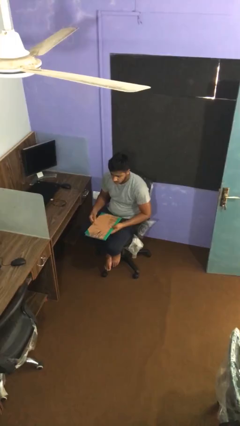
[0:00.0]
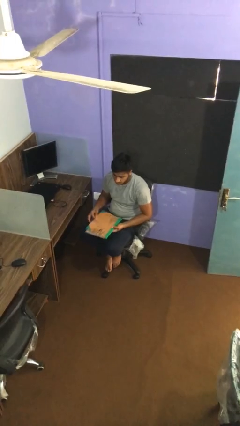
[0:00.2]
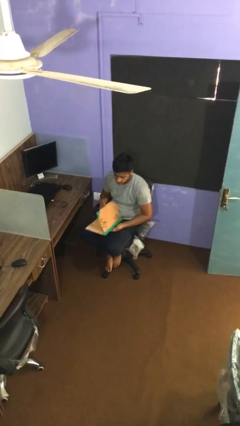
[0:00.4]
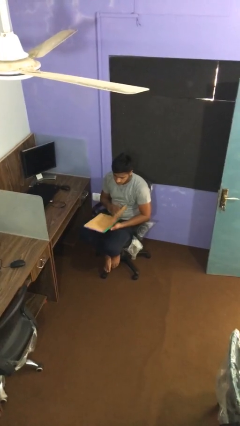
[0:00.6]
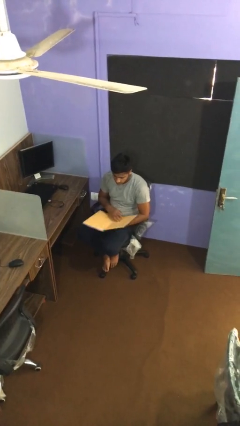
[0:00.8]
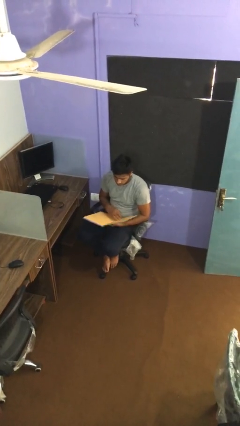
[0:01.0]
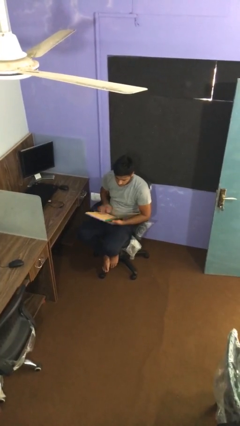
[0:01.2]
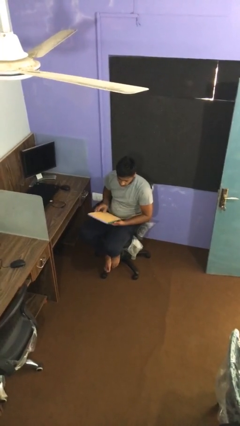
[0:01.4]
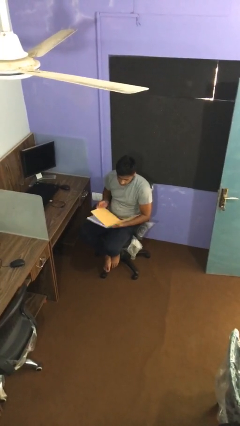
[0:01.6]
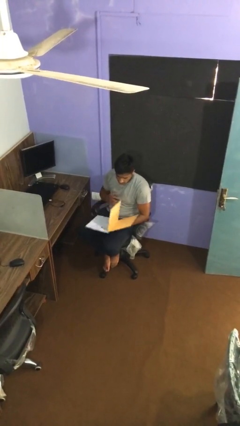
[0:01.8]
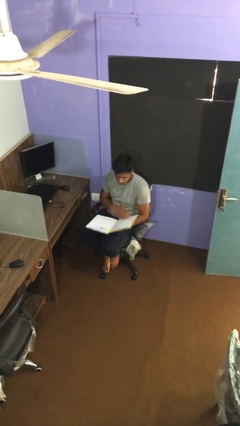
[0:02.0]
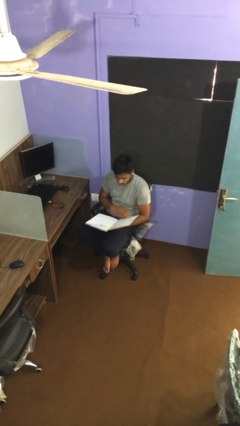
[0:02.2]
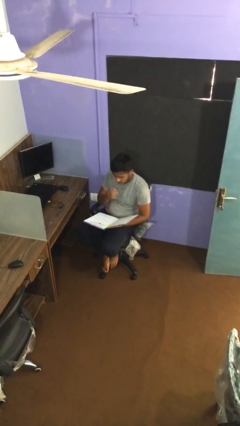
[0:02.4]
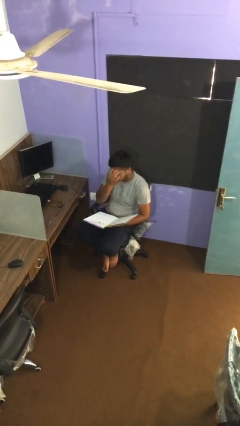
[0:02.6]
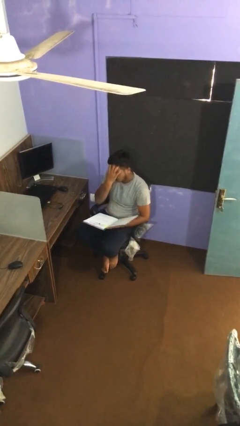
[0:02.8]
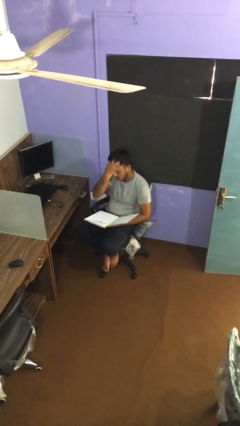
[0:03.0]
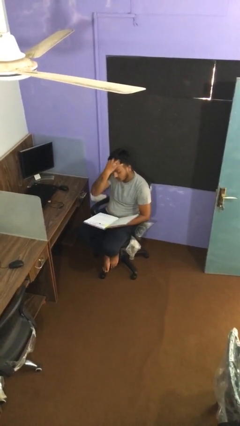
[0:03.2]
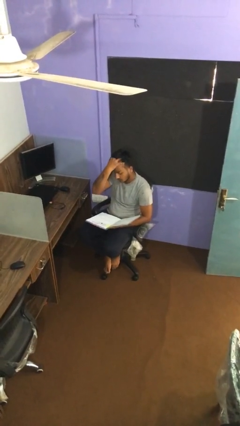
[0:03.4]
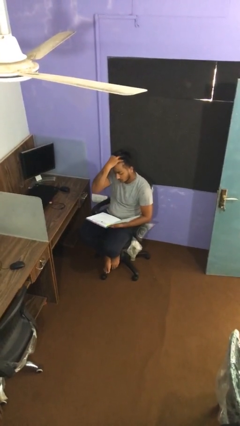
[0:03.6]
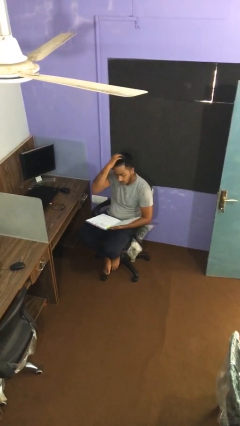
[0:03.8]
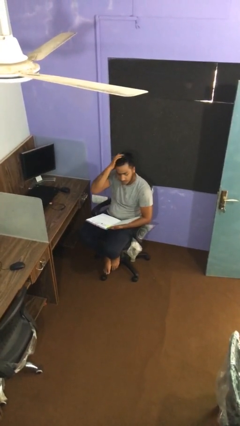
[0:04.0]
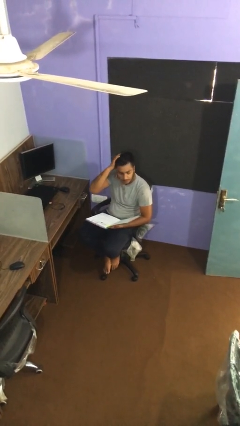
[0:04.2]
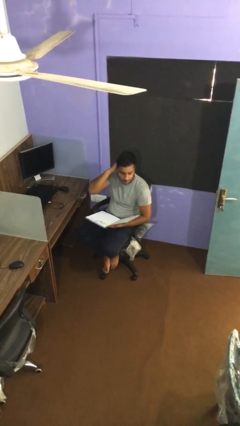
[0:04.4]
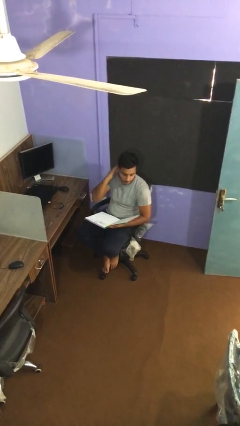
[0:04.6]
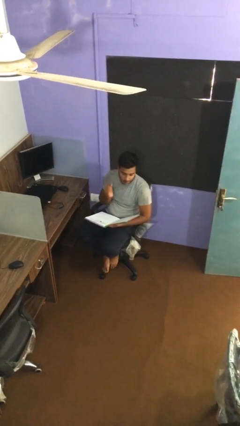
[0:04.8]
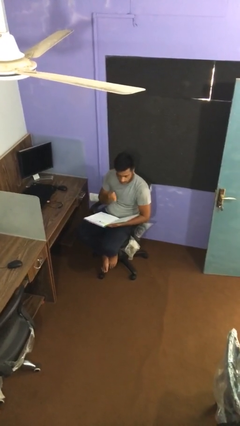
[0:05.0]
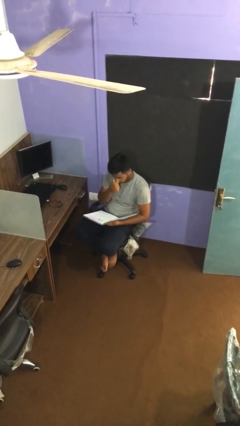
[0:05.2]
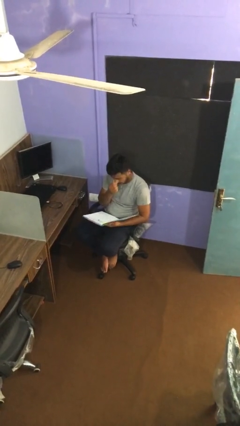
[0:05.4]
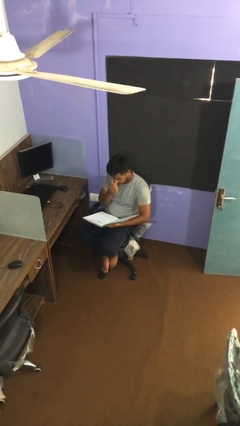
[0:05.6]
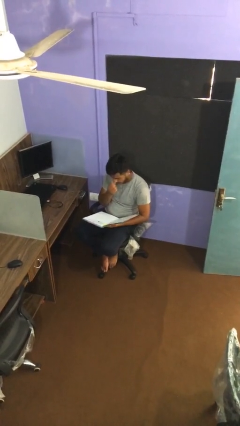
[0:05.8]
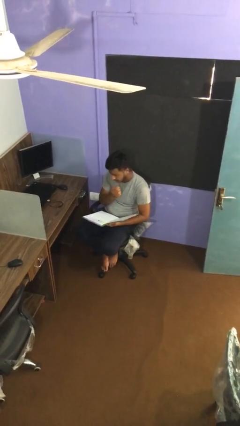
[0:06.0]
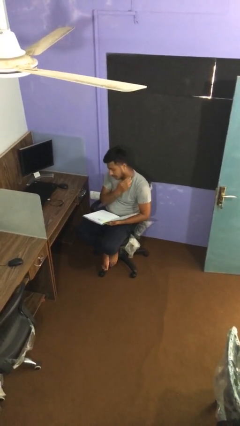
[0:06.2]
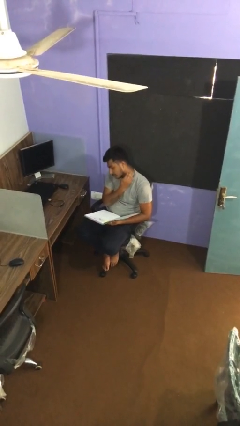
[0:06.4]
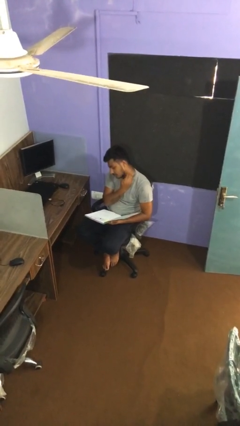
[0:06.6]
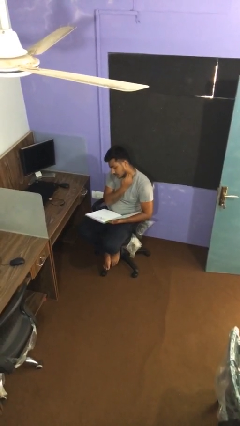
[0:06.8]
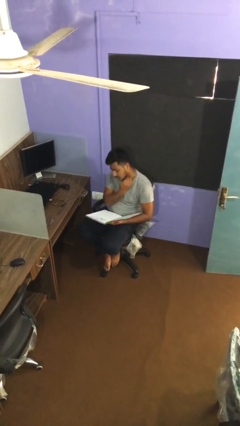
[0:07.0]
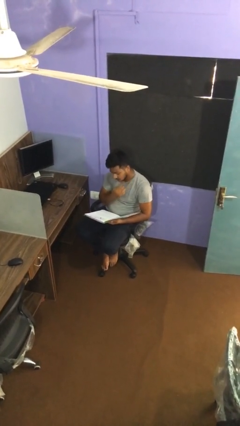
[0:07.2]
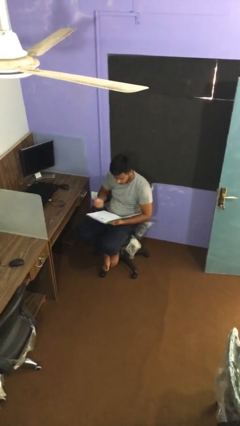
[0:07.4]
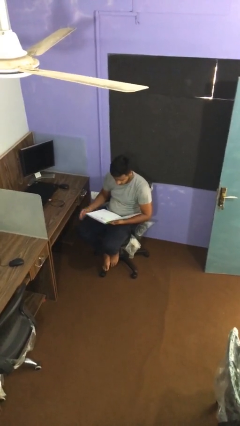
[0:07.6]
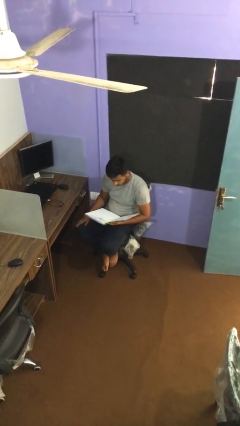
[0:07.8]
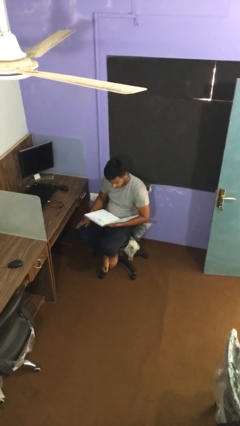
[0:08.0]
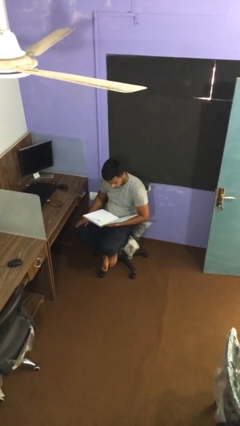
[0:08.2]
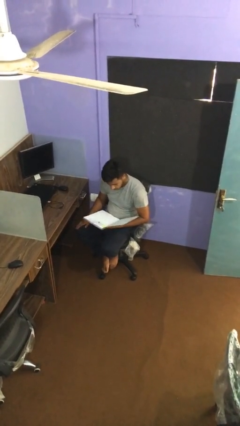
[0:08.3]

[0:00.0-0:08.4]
person reads document

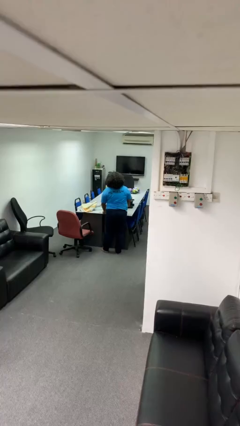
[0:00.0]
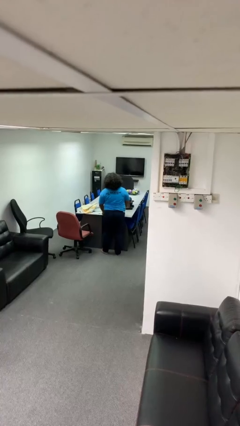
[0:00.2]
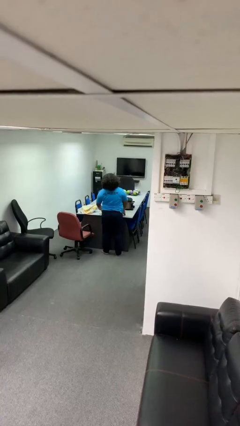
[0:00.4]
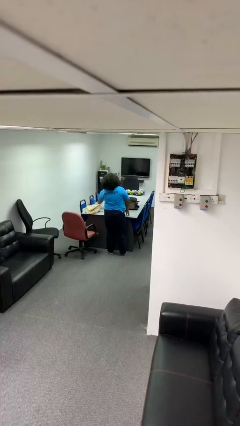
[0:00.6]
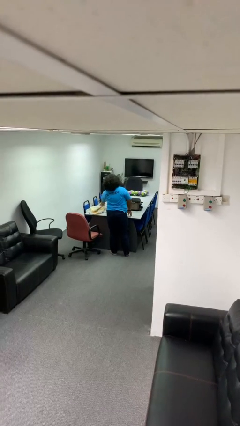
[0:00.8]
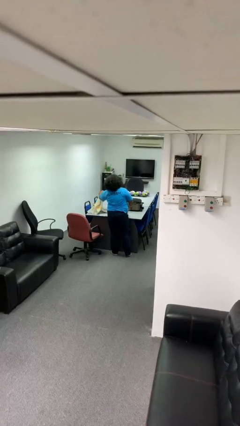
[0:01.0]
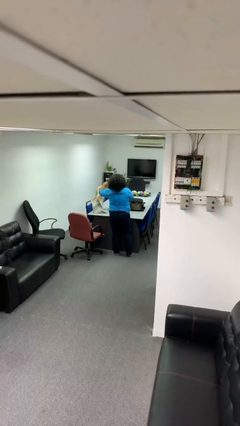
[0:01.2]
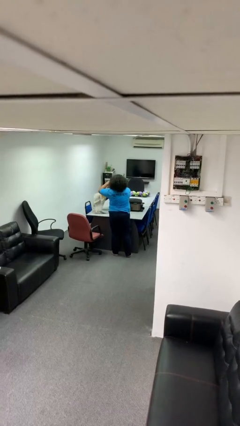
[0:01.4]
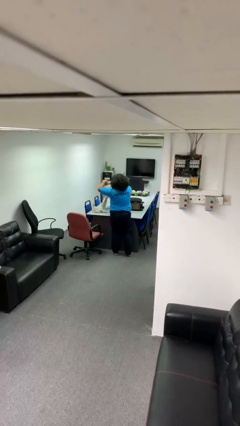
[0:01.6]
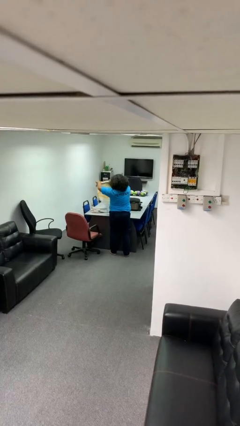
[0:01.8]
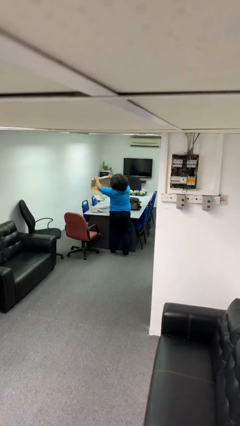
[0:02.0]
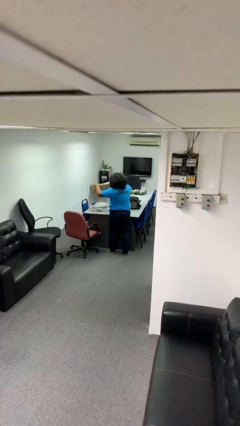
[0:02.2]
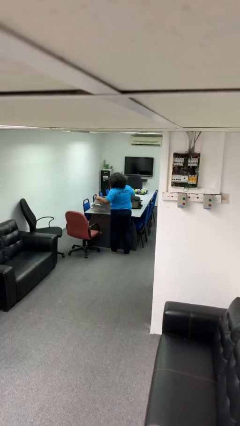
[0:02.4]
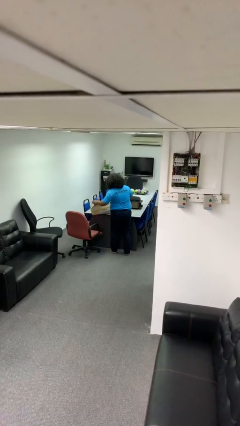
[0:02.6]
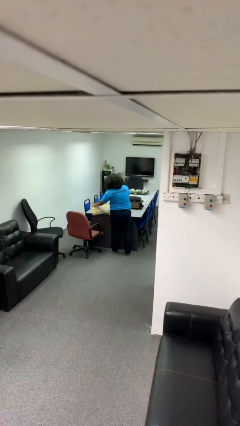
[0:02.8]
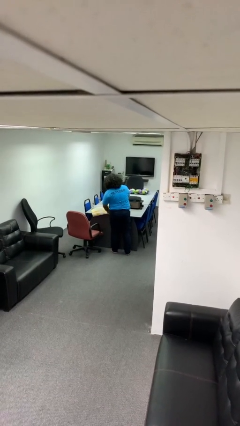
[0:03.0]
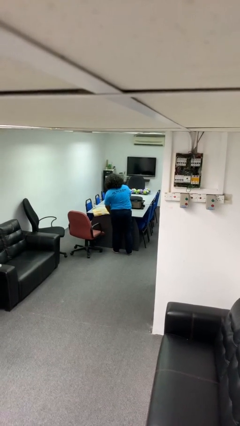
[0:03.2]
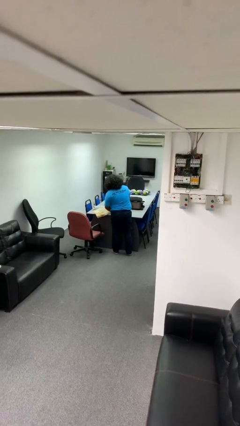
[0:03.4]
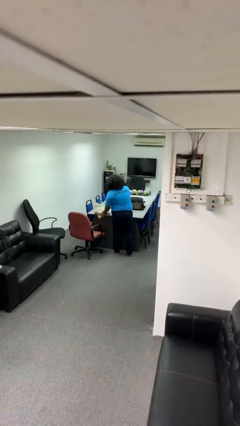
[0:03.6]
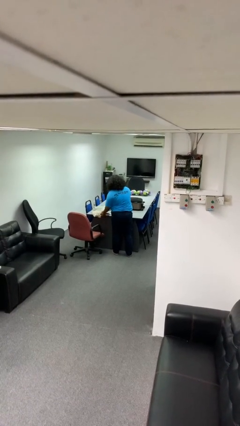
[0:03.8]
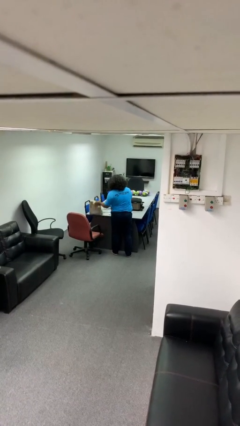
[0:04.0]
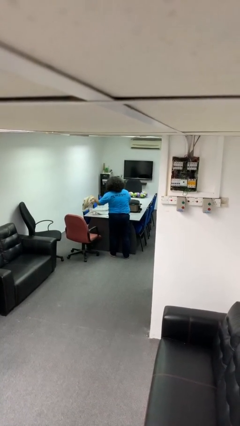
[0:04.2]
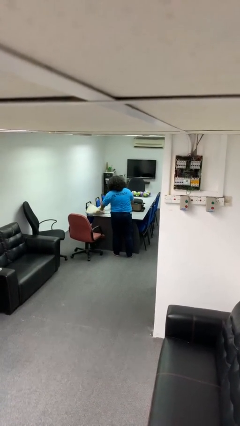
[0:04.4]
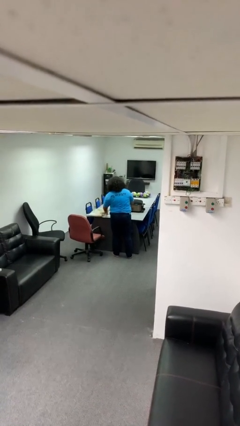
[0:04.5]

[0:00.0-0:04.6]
person folds towel

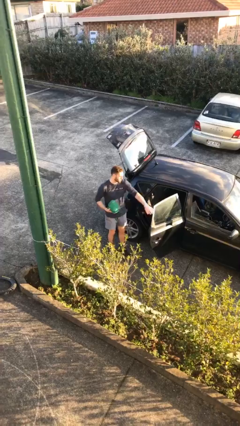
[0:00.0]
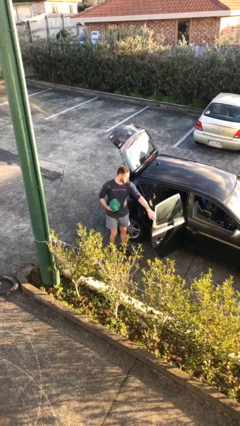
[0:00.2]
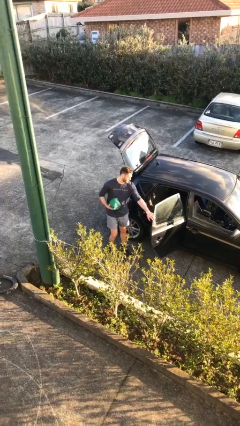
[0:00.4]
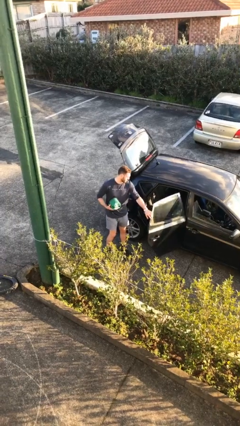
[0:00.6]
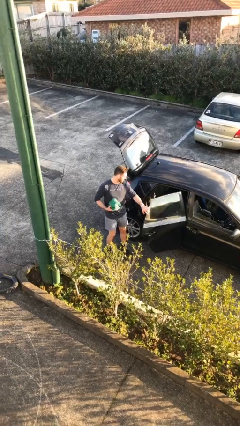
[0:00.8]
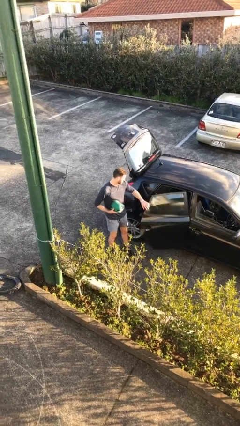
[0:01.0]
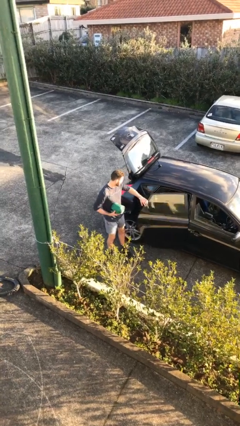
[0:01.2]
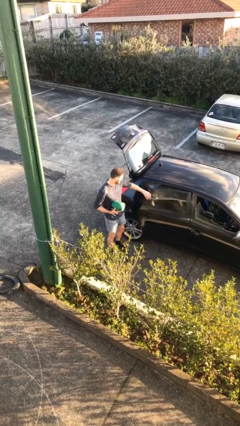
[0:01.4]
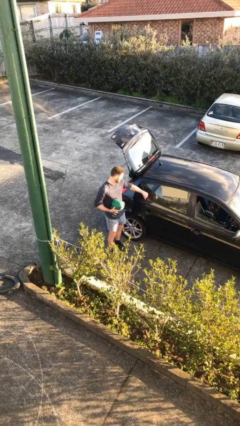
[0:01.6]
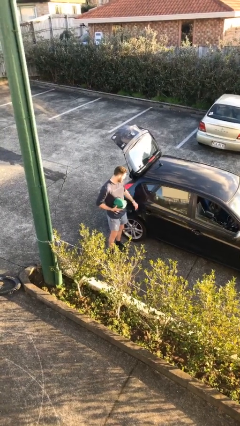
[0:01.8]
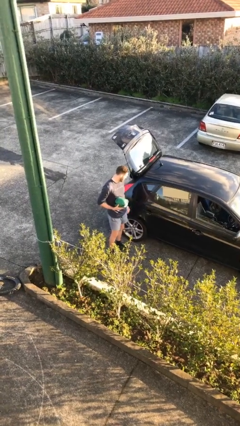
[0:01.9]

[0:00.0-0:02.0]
person closes car door

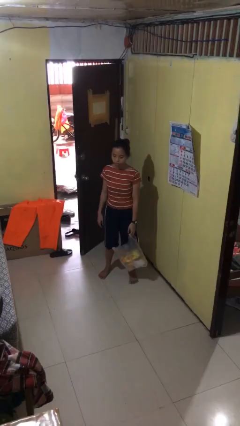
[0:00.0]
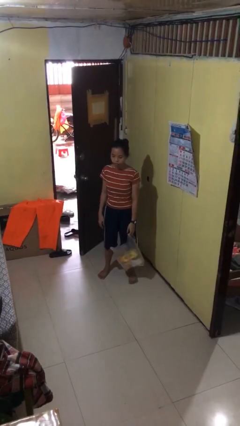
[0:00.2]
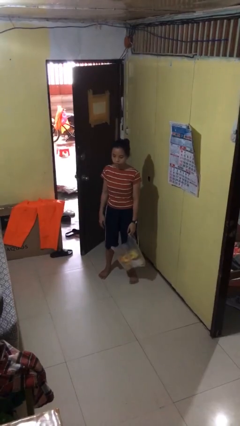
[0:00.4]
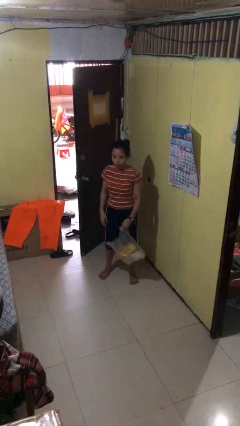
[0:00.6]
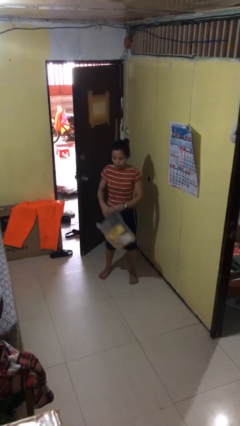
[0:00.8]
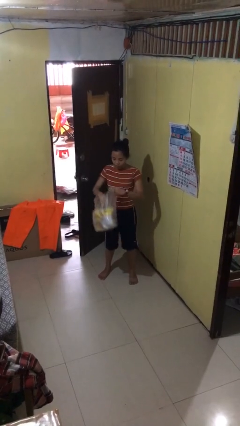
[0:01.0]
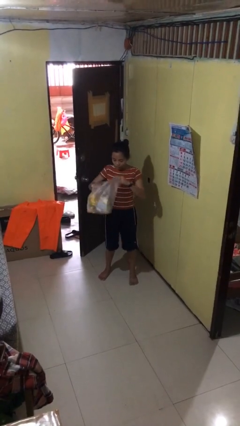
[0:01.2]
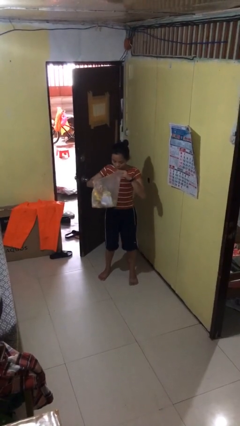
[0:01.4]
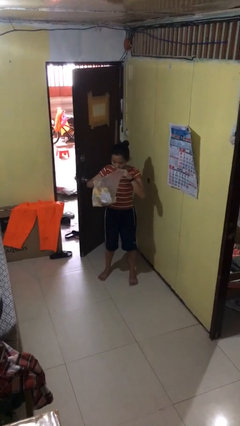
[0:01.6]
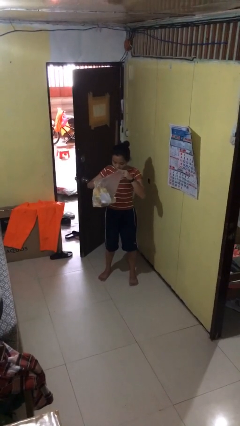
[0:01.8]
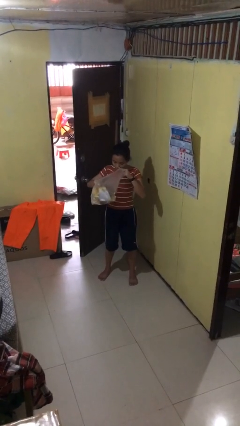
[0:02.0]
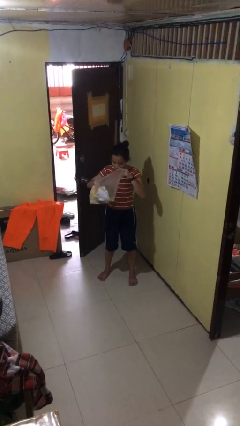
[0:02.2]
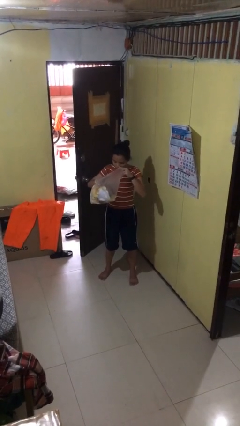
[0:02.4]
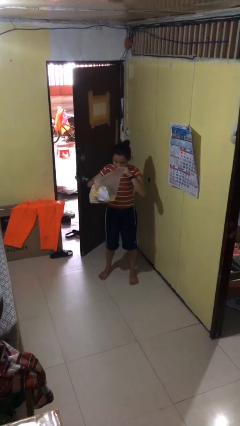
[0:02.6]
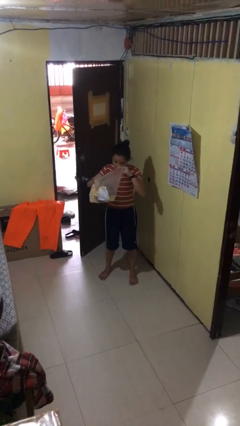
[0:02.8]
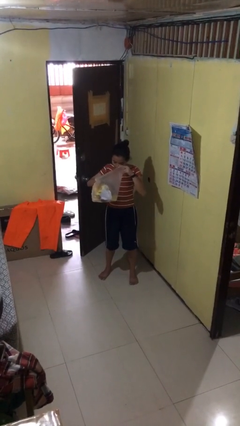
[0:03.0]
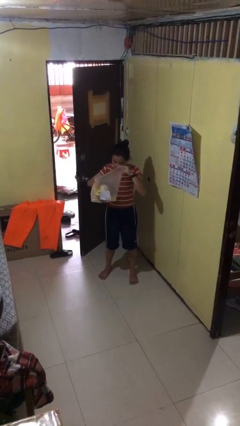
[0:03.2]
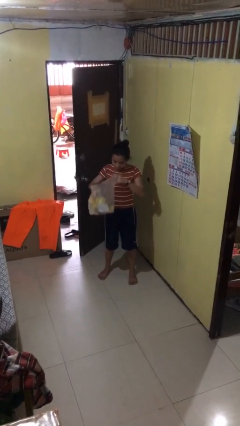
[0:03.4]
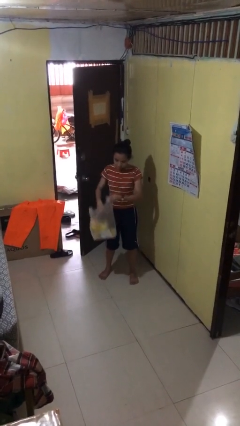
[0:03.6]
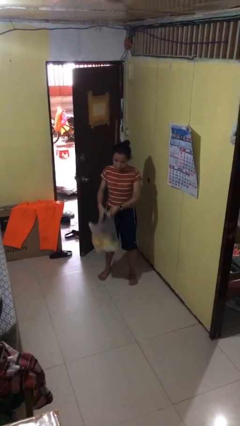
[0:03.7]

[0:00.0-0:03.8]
person searches in bag
